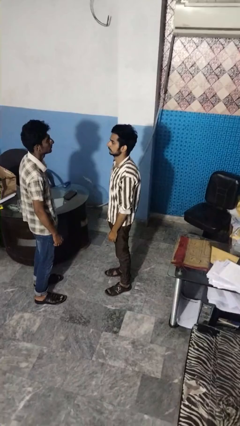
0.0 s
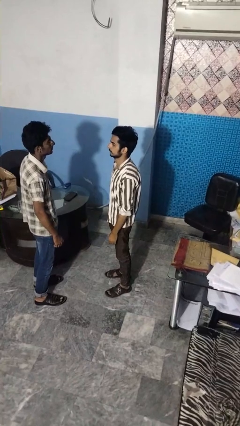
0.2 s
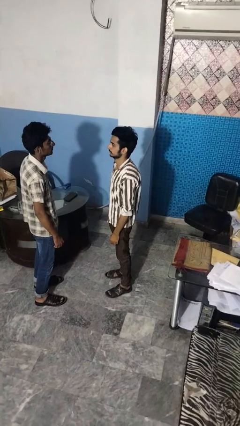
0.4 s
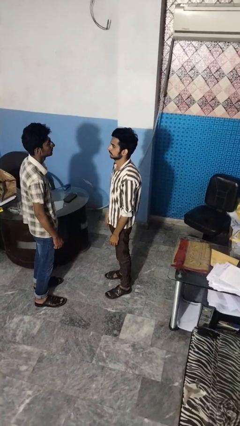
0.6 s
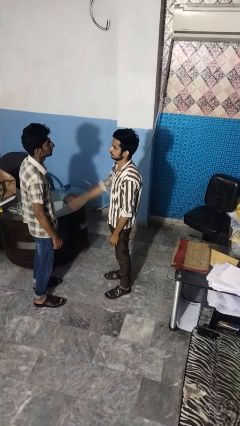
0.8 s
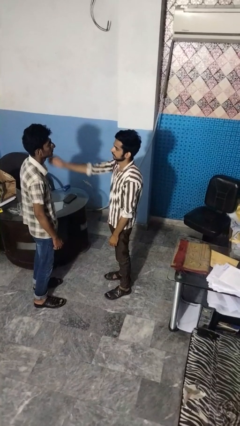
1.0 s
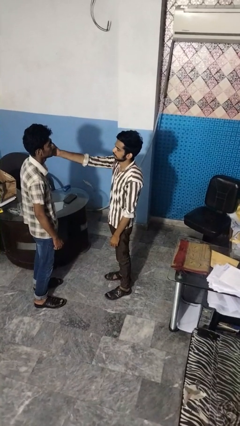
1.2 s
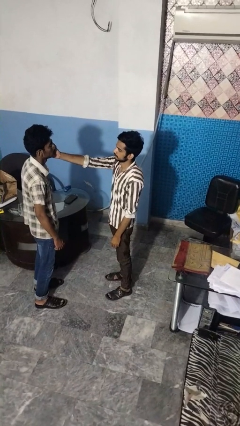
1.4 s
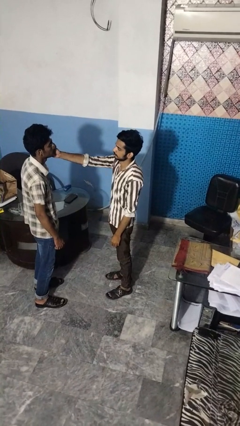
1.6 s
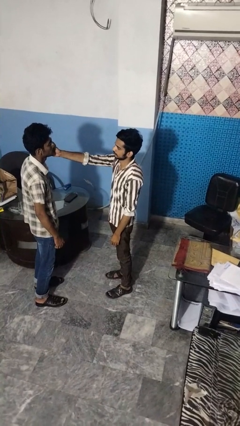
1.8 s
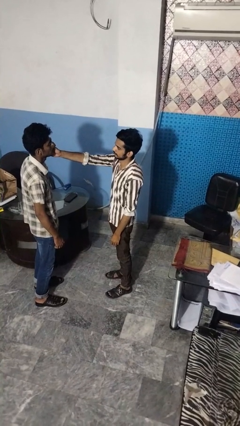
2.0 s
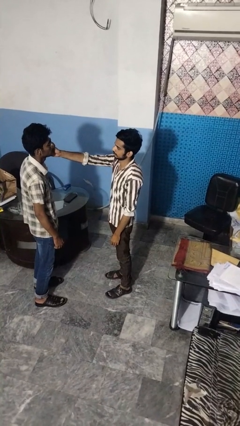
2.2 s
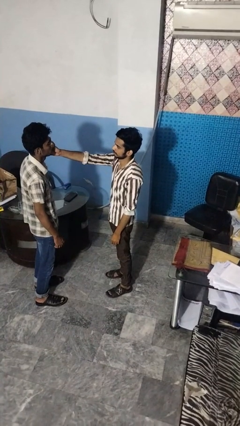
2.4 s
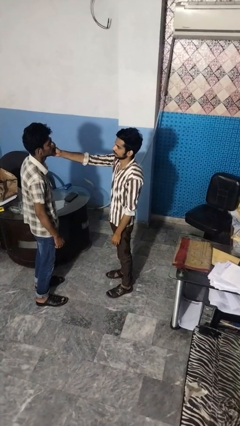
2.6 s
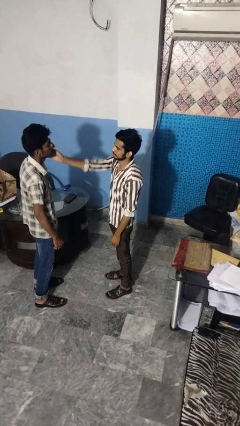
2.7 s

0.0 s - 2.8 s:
person touches face of person

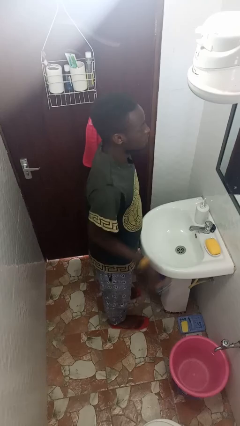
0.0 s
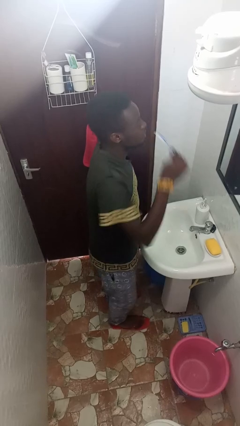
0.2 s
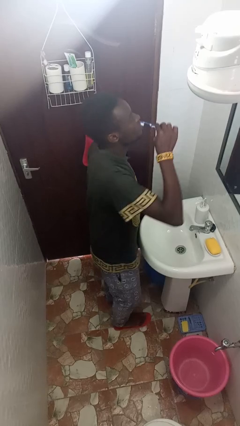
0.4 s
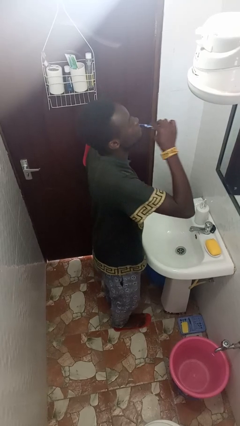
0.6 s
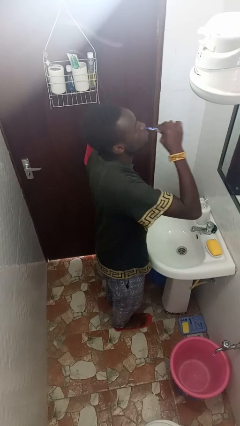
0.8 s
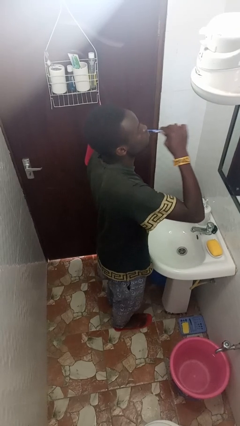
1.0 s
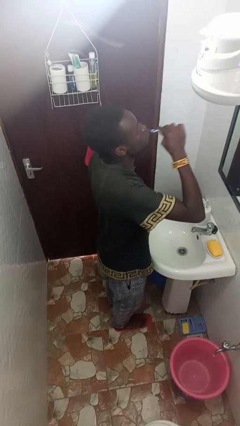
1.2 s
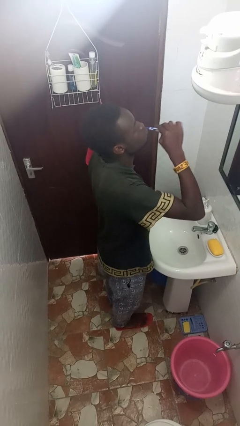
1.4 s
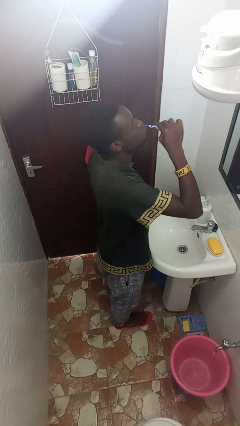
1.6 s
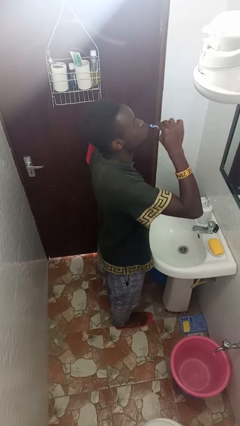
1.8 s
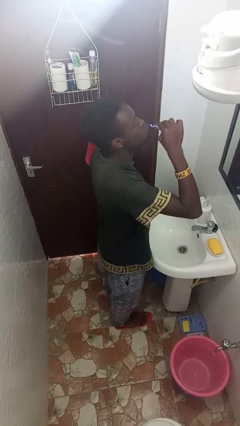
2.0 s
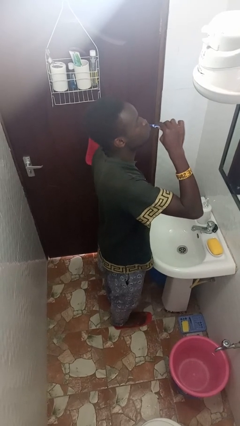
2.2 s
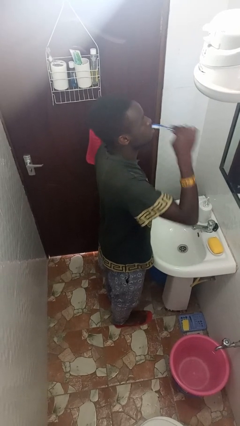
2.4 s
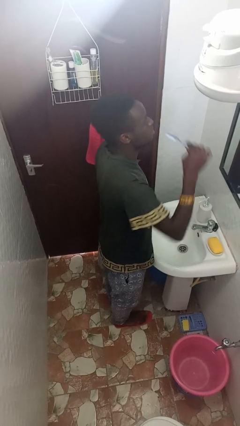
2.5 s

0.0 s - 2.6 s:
person brushes teeth

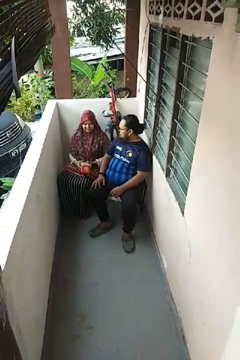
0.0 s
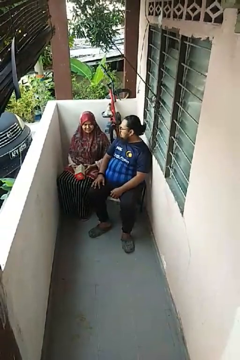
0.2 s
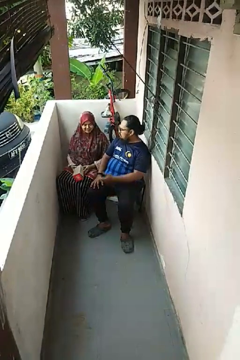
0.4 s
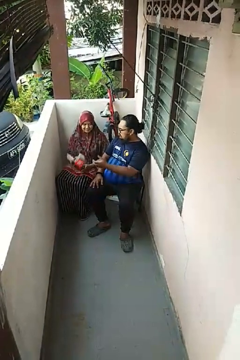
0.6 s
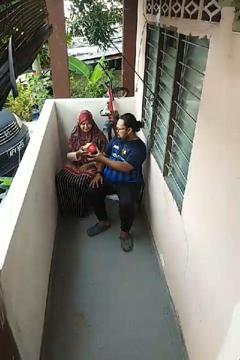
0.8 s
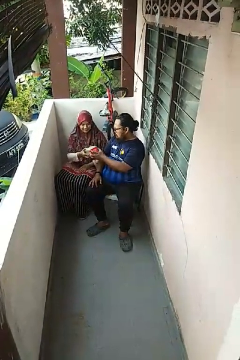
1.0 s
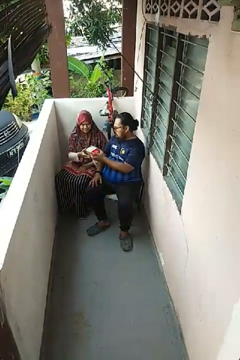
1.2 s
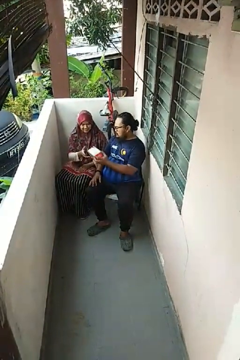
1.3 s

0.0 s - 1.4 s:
person transfers object to person

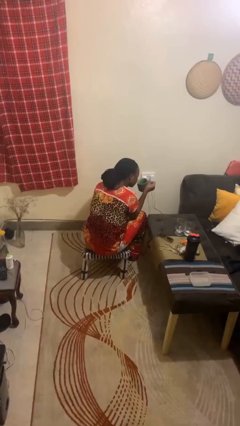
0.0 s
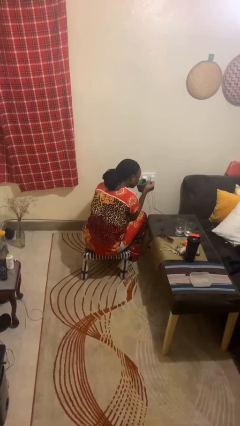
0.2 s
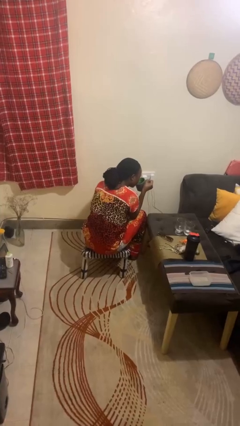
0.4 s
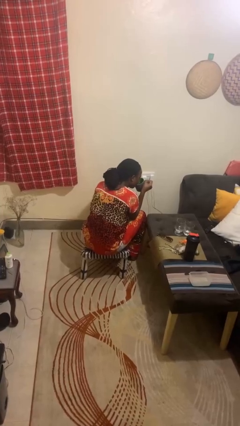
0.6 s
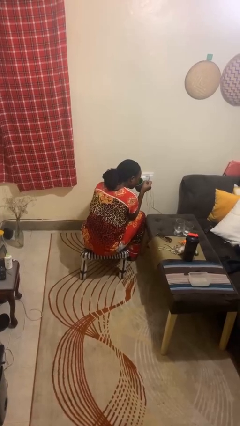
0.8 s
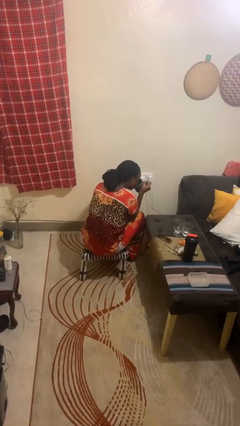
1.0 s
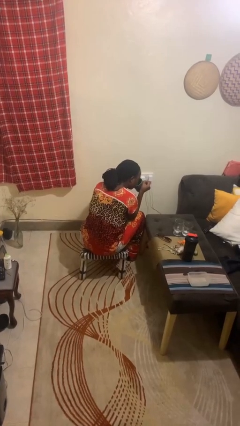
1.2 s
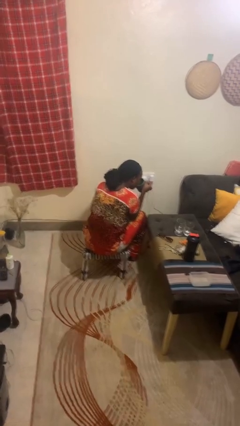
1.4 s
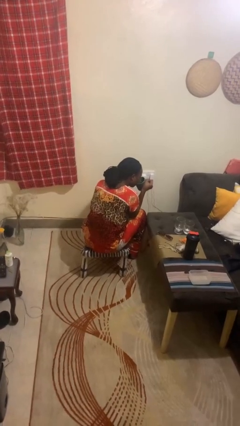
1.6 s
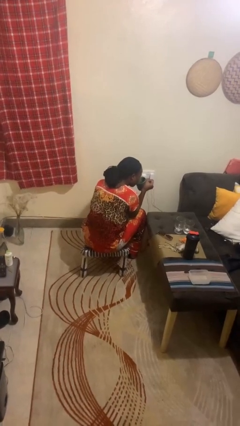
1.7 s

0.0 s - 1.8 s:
person drinks from mug

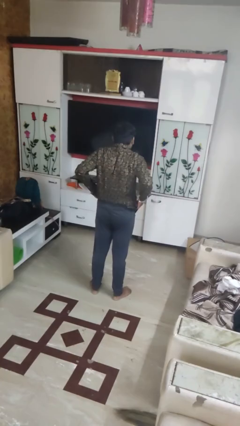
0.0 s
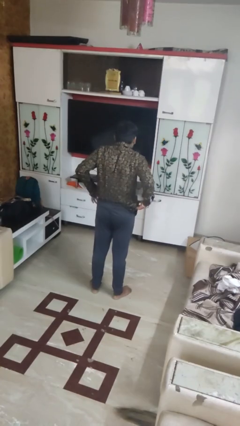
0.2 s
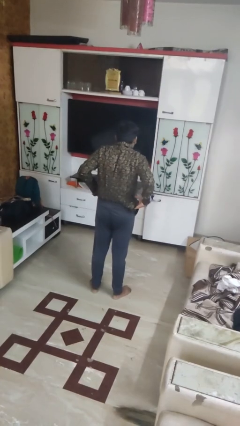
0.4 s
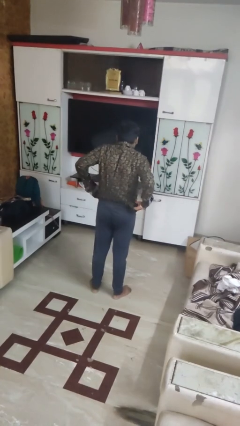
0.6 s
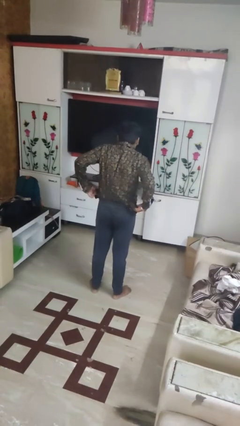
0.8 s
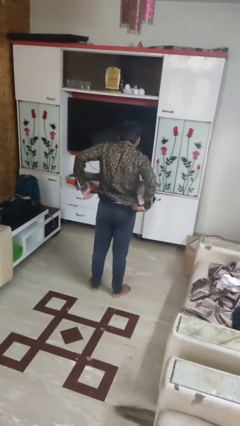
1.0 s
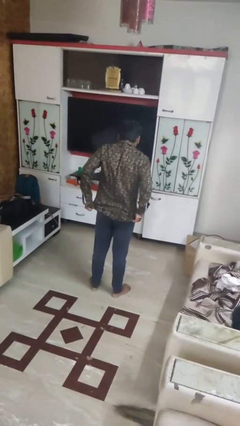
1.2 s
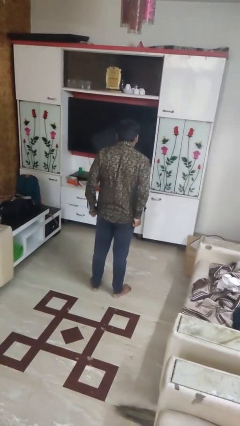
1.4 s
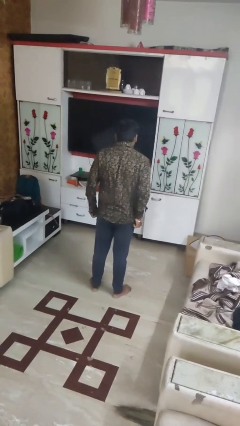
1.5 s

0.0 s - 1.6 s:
person untucks shirt

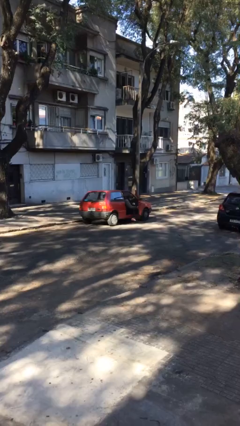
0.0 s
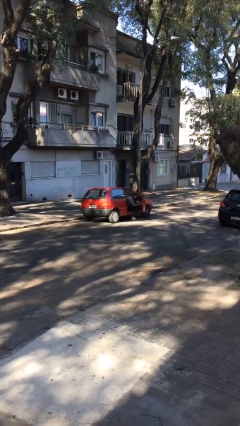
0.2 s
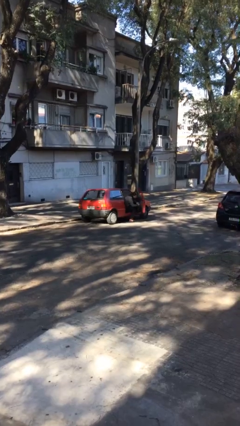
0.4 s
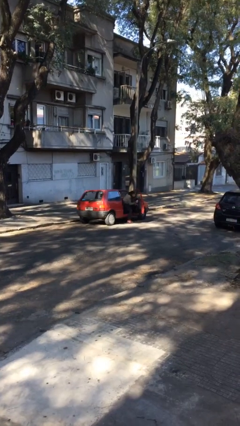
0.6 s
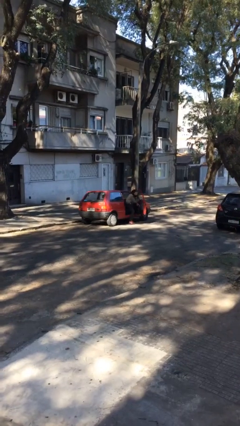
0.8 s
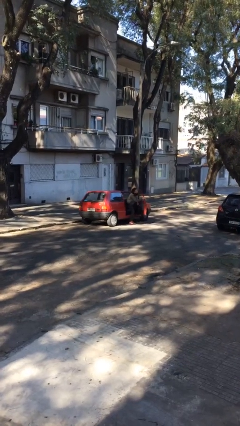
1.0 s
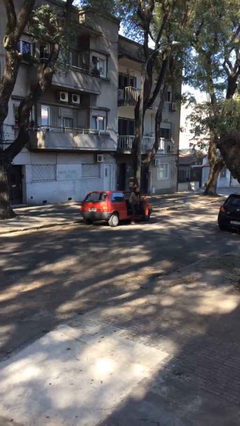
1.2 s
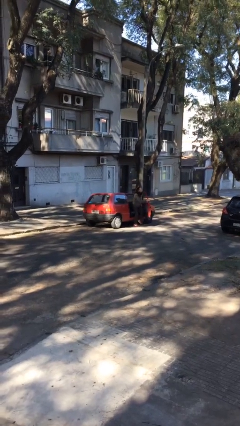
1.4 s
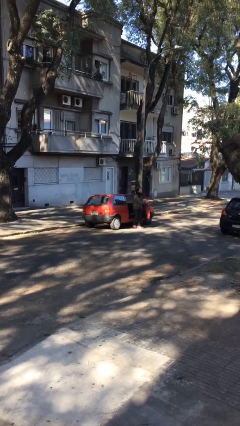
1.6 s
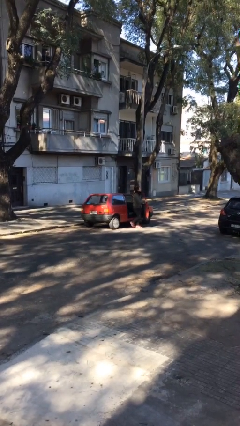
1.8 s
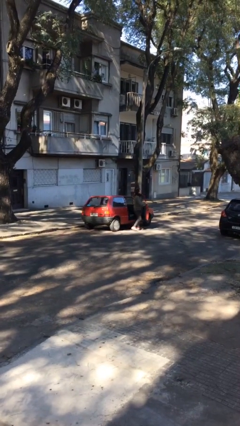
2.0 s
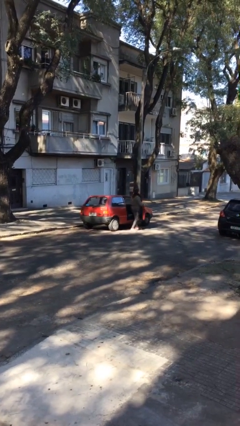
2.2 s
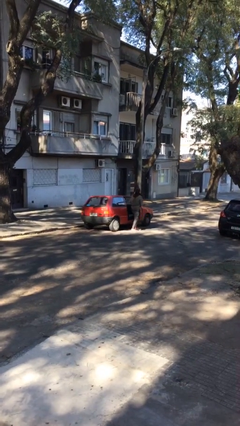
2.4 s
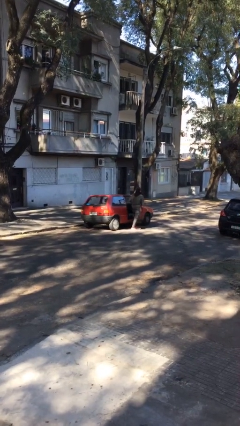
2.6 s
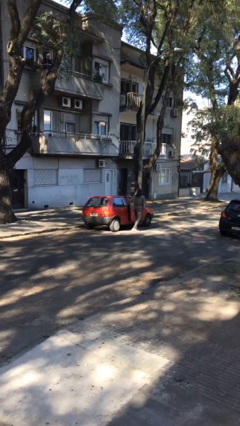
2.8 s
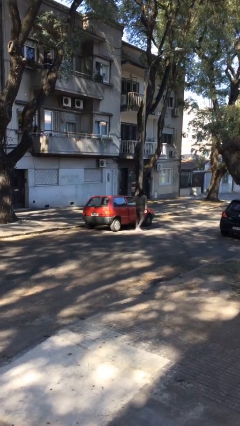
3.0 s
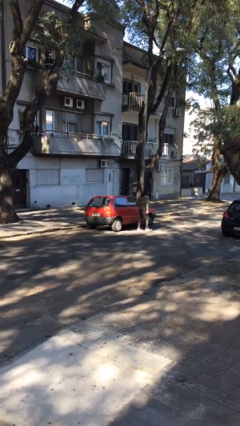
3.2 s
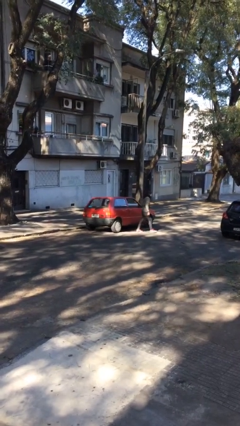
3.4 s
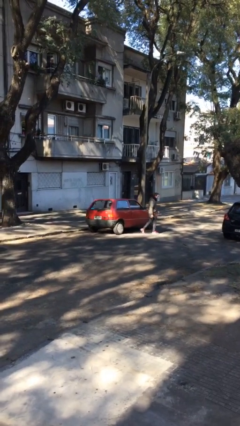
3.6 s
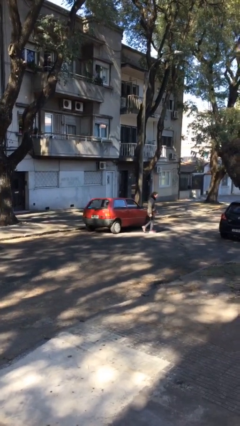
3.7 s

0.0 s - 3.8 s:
car drops off person

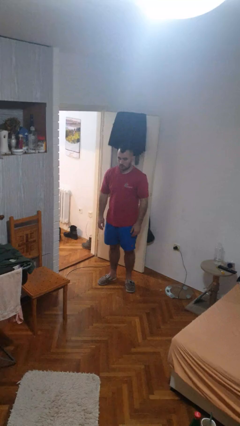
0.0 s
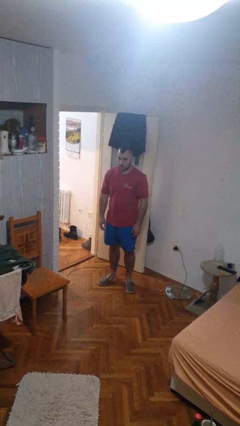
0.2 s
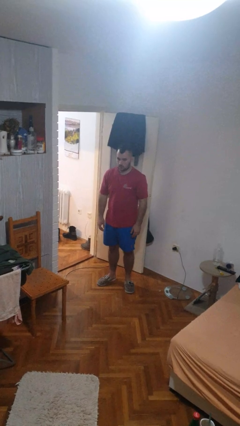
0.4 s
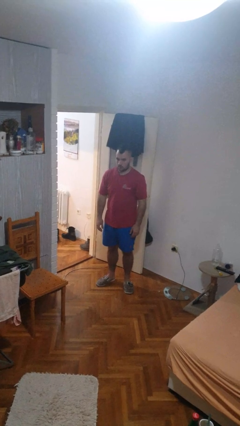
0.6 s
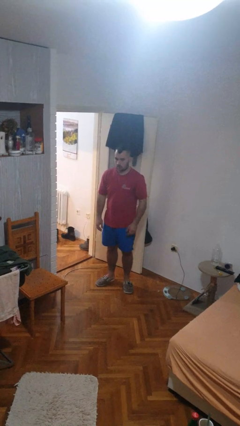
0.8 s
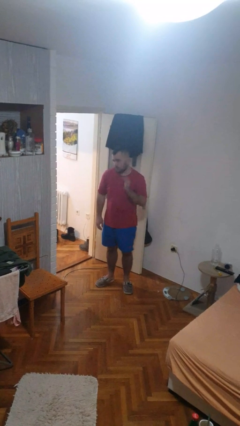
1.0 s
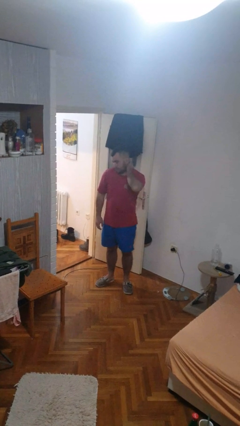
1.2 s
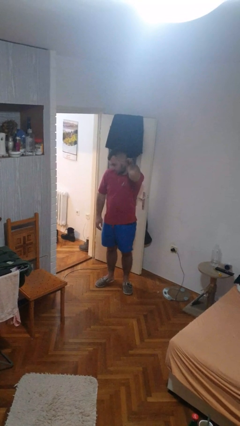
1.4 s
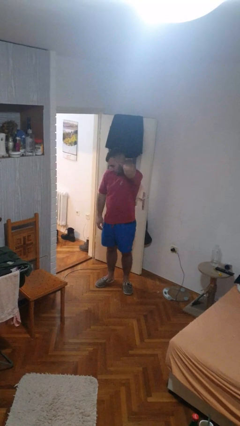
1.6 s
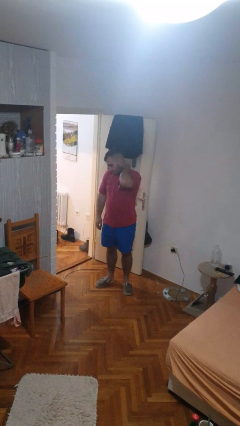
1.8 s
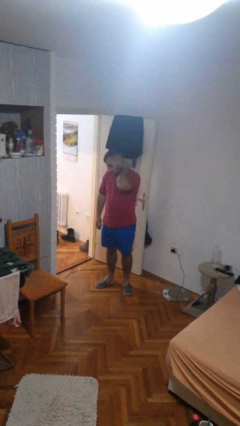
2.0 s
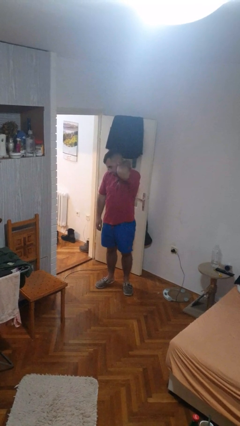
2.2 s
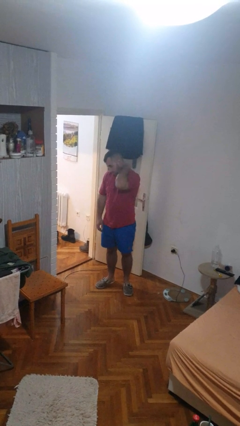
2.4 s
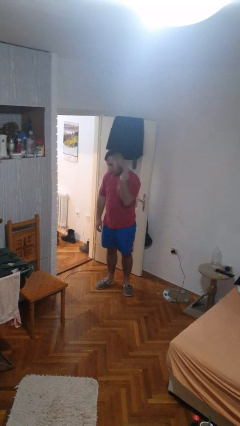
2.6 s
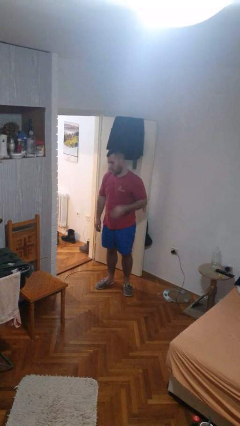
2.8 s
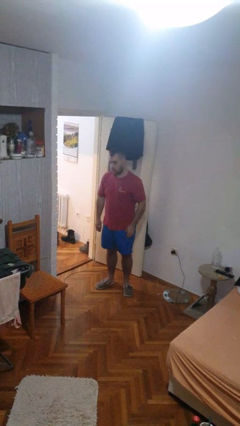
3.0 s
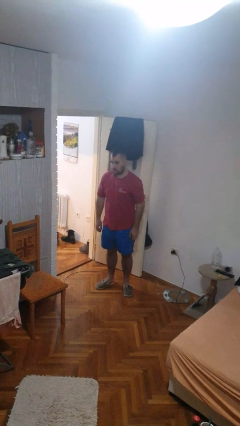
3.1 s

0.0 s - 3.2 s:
person rubs neck
